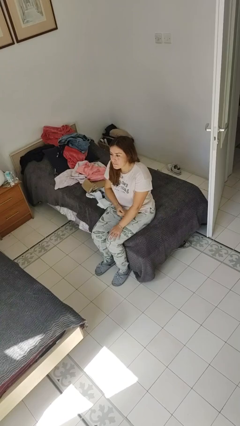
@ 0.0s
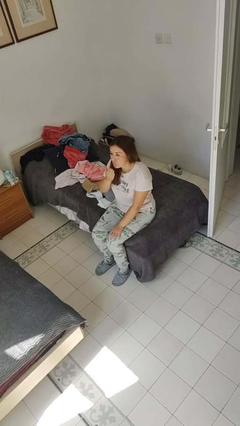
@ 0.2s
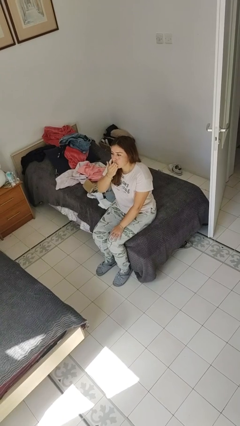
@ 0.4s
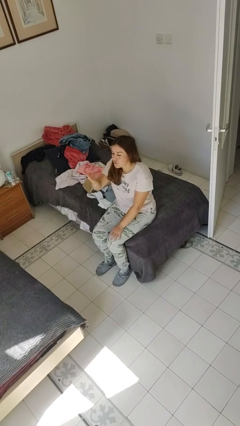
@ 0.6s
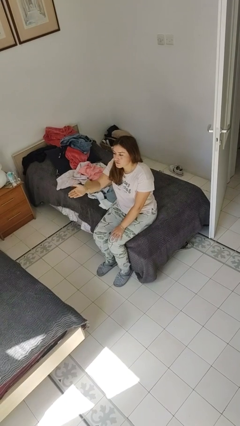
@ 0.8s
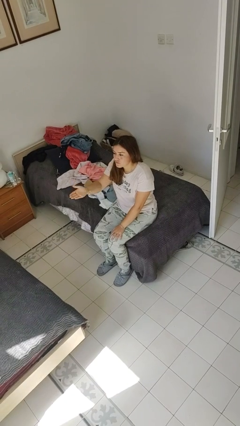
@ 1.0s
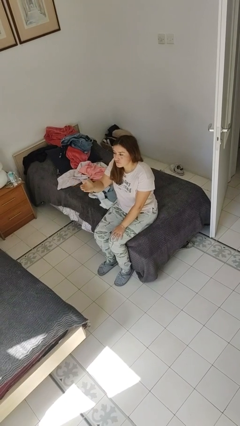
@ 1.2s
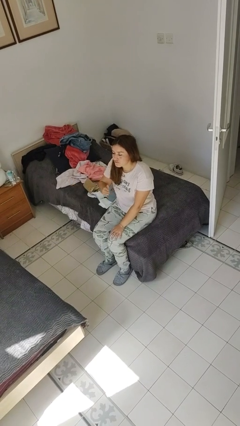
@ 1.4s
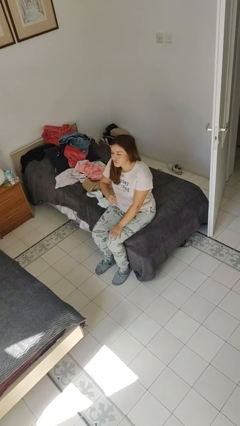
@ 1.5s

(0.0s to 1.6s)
person gestures blow kiss

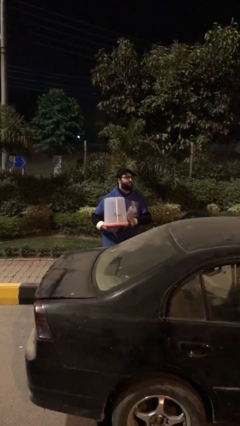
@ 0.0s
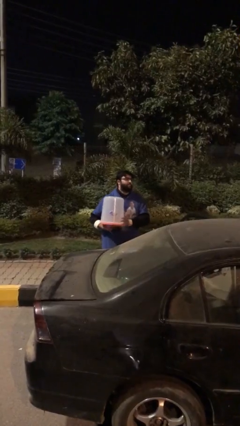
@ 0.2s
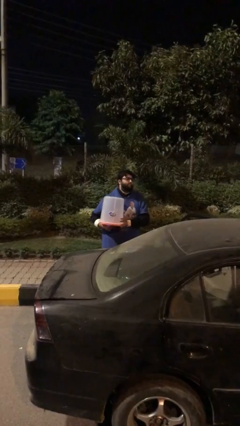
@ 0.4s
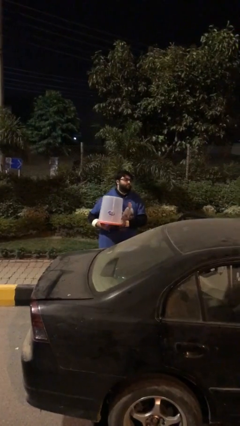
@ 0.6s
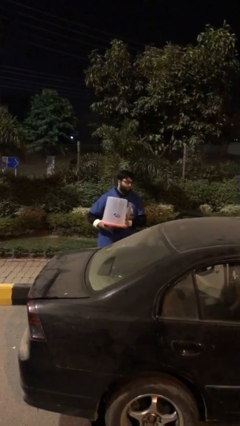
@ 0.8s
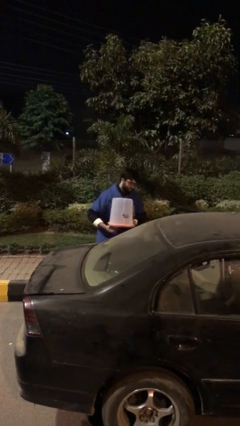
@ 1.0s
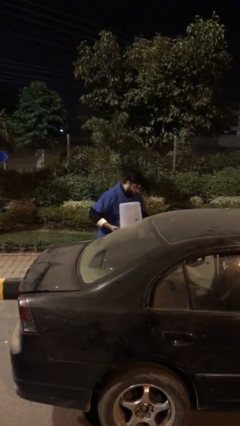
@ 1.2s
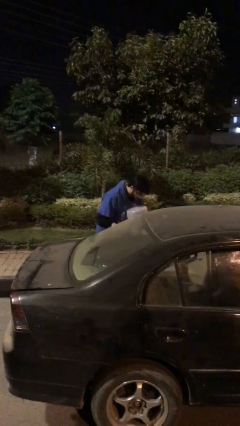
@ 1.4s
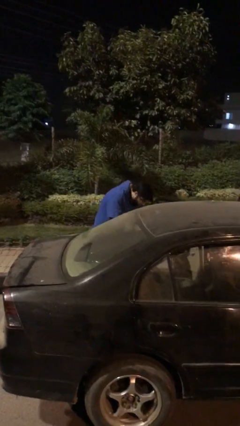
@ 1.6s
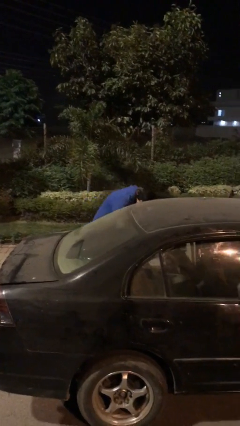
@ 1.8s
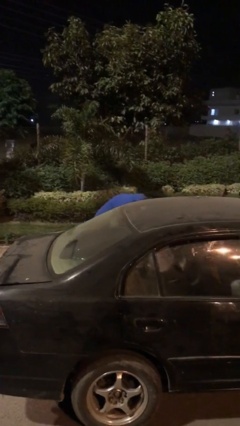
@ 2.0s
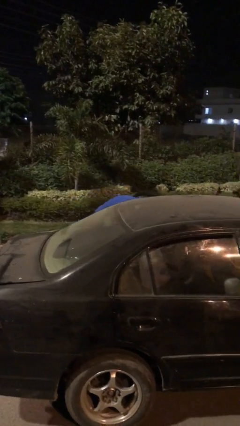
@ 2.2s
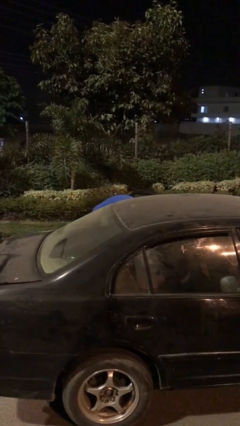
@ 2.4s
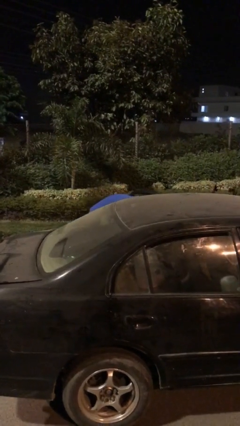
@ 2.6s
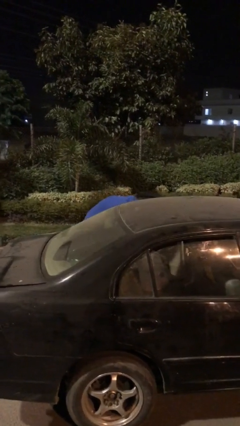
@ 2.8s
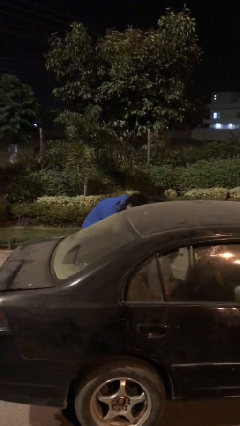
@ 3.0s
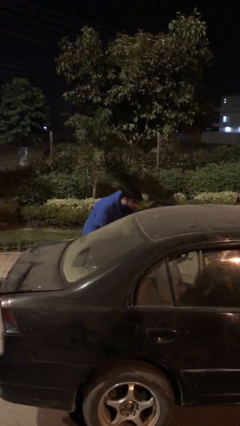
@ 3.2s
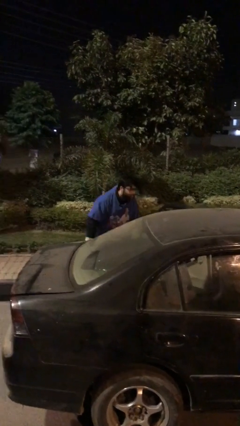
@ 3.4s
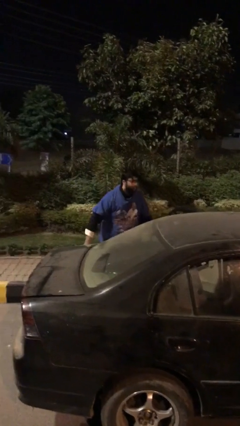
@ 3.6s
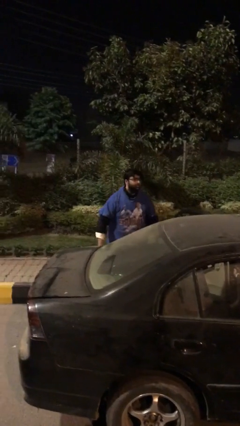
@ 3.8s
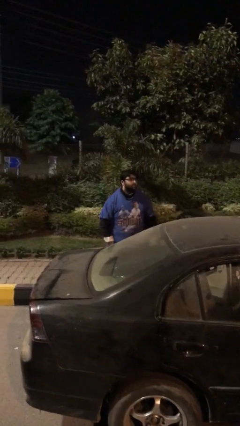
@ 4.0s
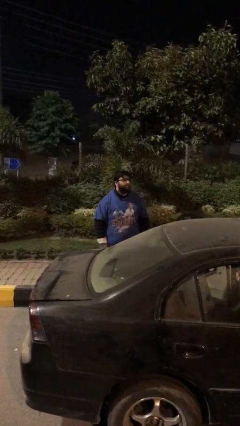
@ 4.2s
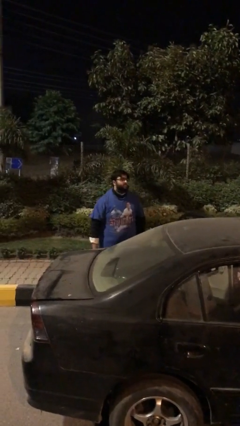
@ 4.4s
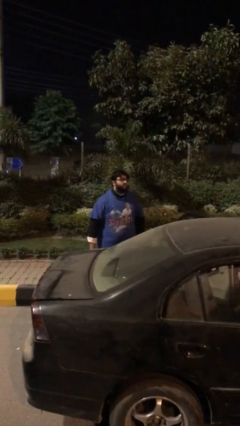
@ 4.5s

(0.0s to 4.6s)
person loads car

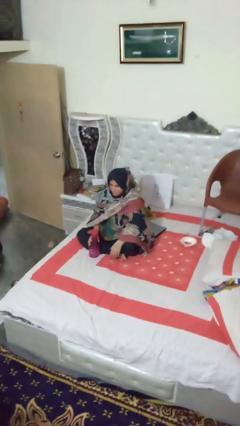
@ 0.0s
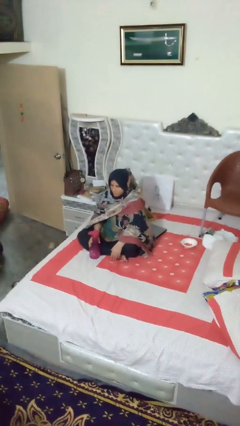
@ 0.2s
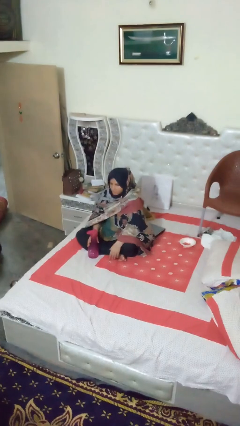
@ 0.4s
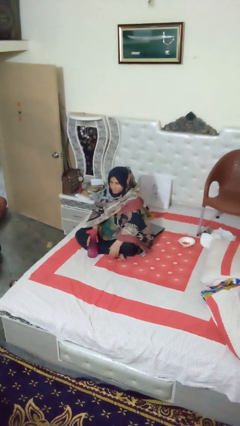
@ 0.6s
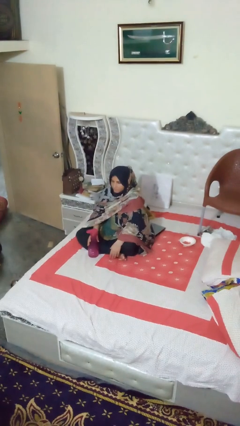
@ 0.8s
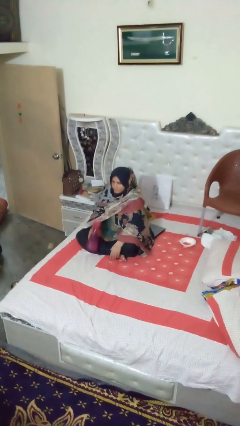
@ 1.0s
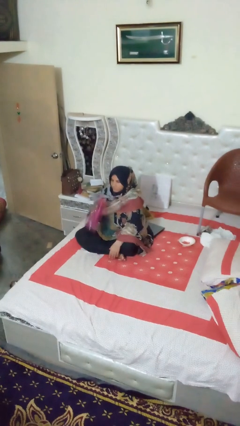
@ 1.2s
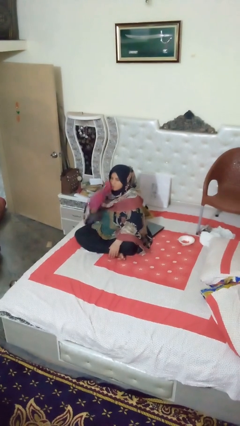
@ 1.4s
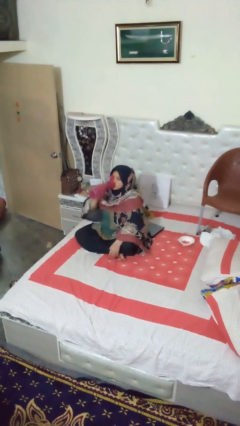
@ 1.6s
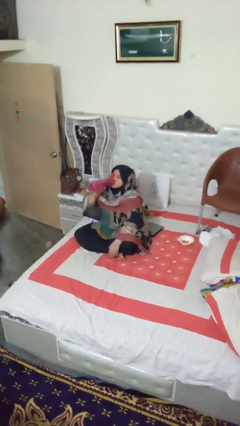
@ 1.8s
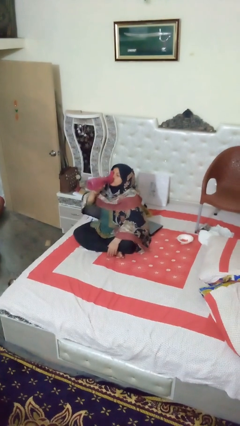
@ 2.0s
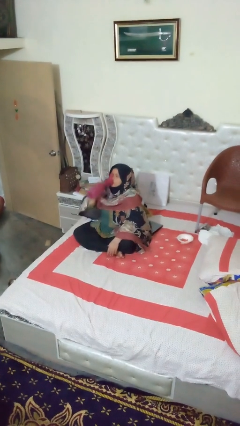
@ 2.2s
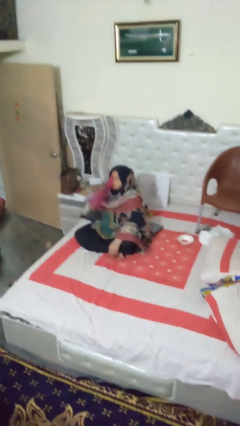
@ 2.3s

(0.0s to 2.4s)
person drinks from bottle

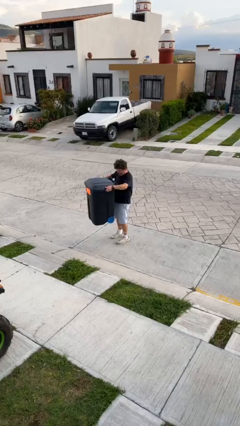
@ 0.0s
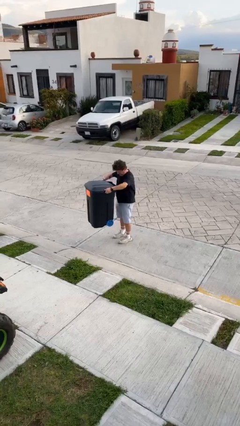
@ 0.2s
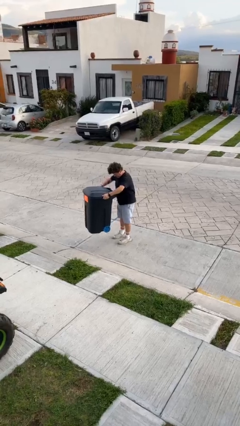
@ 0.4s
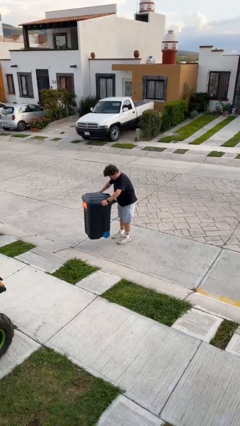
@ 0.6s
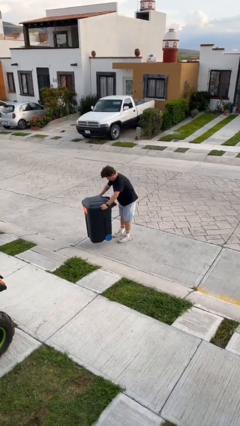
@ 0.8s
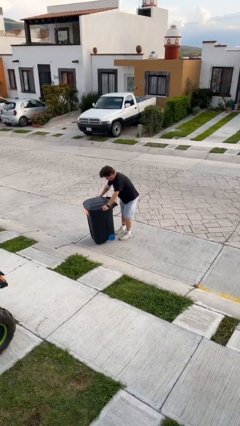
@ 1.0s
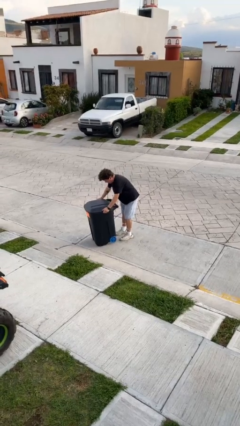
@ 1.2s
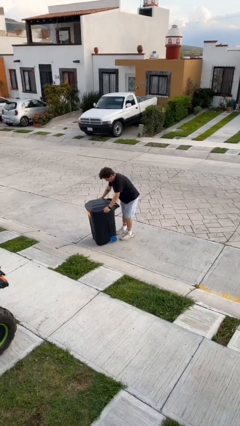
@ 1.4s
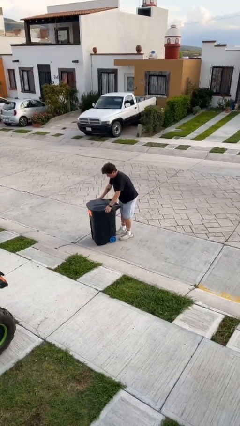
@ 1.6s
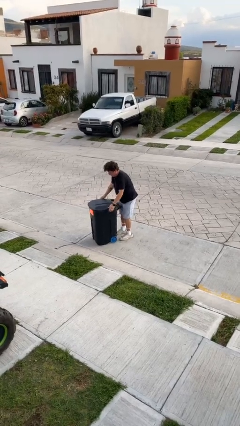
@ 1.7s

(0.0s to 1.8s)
person puts down object on floor

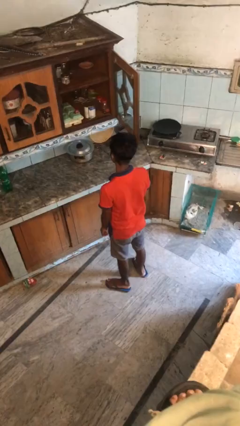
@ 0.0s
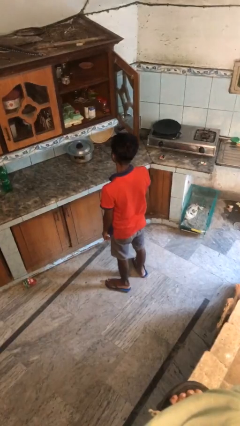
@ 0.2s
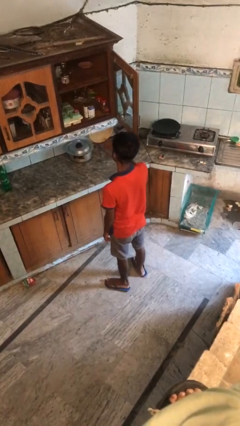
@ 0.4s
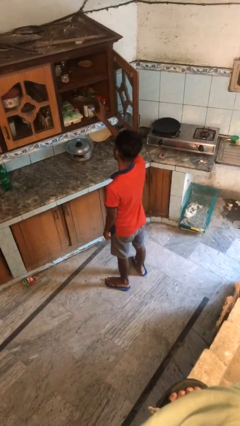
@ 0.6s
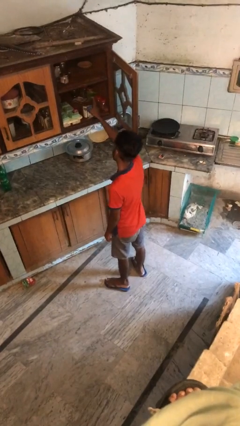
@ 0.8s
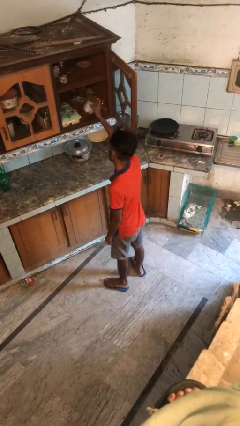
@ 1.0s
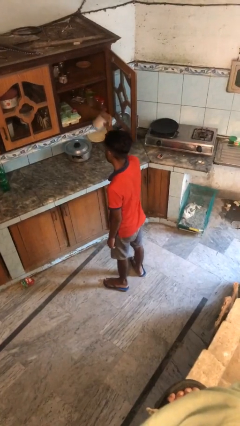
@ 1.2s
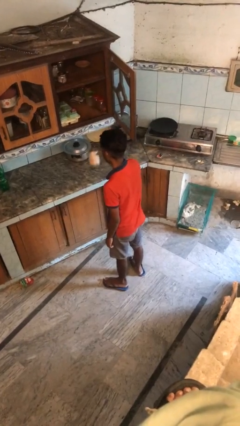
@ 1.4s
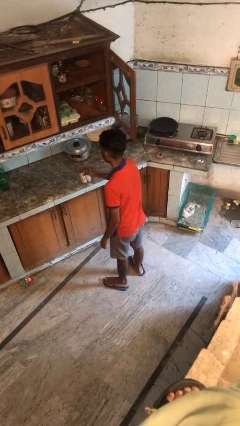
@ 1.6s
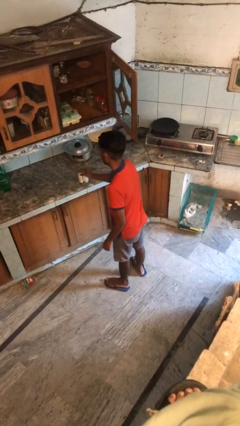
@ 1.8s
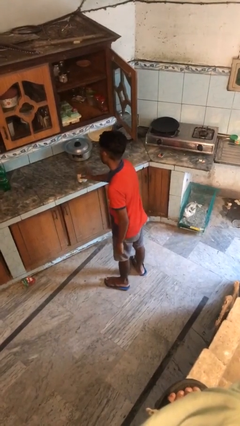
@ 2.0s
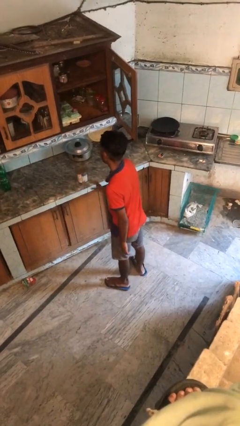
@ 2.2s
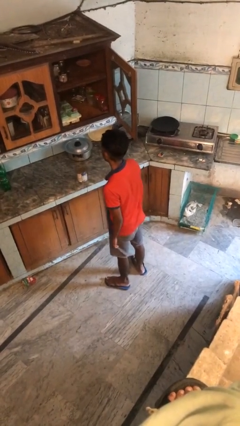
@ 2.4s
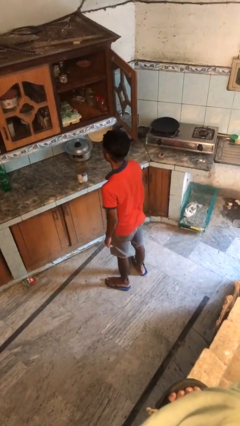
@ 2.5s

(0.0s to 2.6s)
person takes object from cabinet

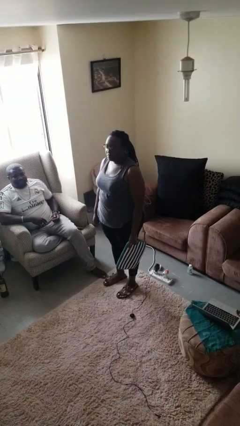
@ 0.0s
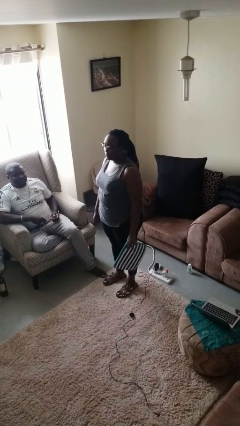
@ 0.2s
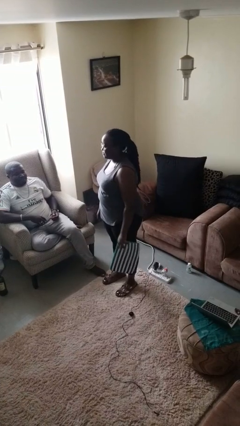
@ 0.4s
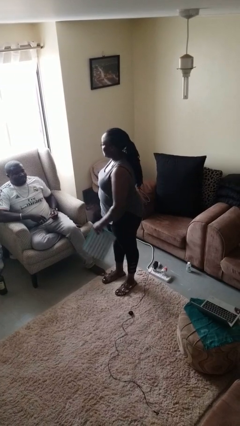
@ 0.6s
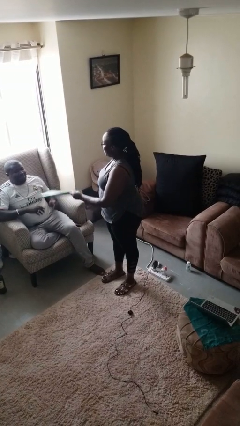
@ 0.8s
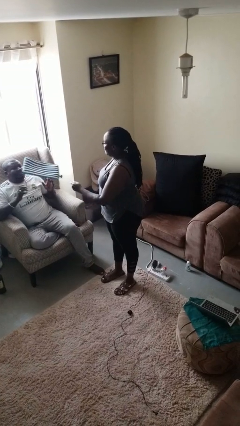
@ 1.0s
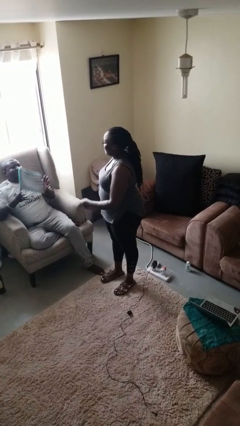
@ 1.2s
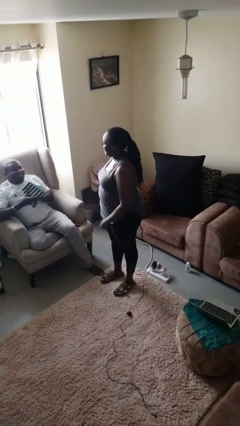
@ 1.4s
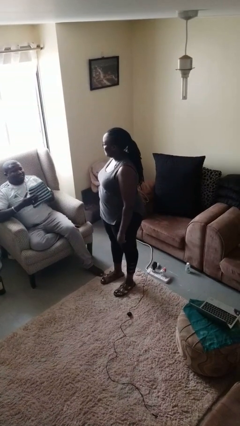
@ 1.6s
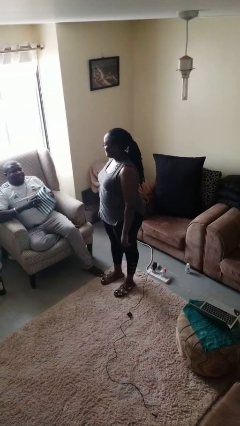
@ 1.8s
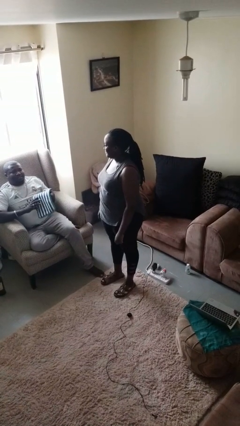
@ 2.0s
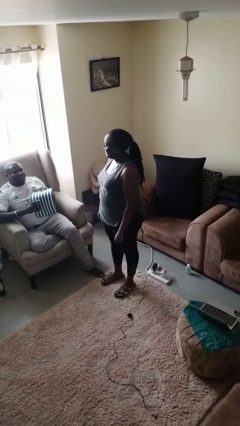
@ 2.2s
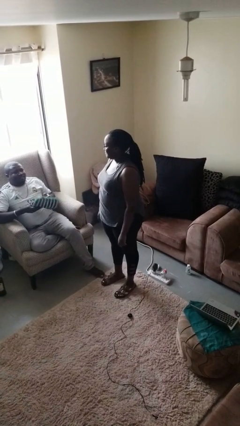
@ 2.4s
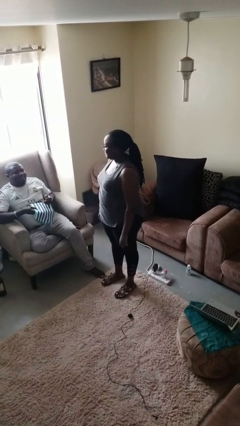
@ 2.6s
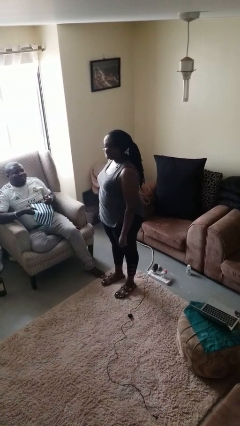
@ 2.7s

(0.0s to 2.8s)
person throws object to person

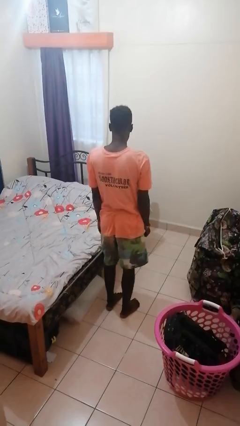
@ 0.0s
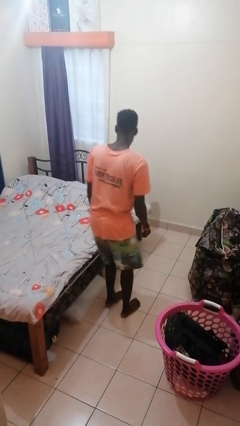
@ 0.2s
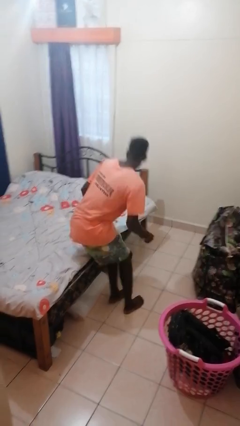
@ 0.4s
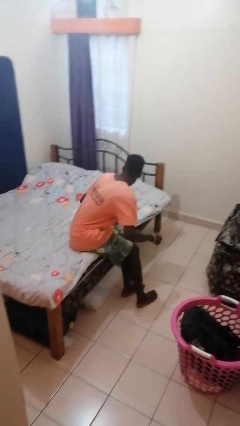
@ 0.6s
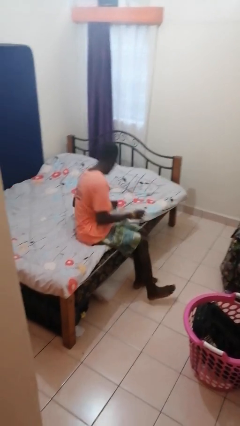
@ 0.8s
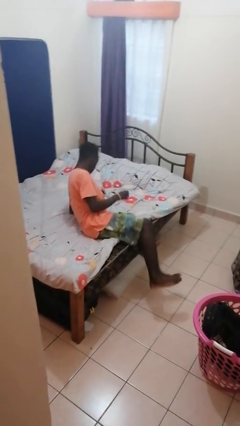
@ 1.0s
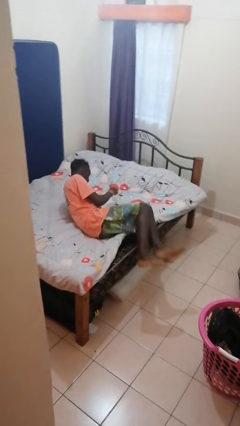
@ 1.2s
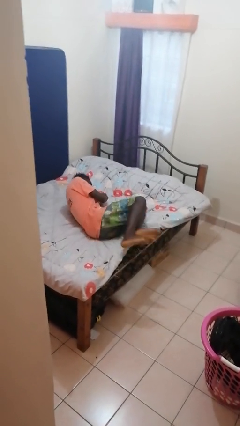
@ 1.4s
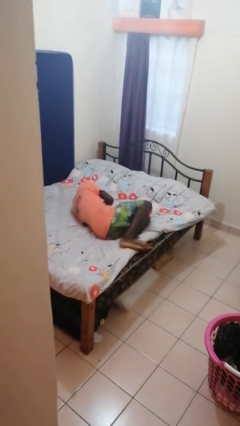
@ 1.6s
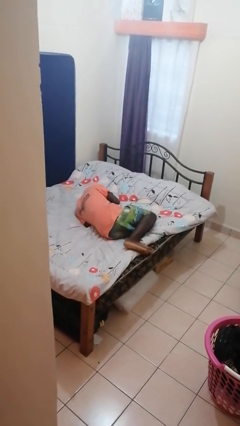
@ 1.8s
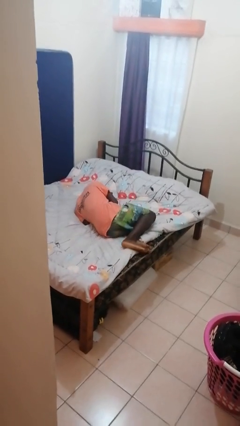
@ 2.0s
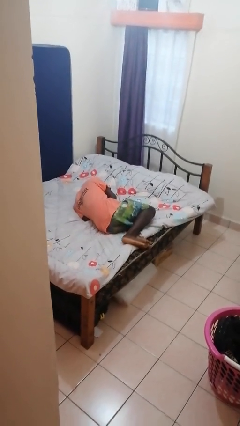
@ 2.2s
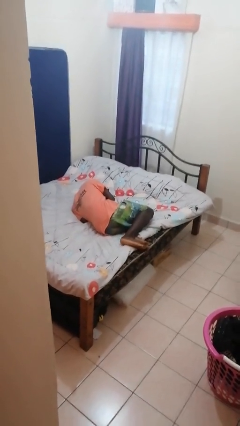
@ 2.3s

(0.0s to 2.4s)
person lies down on bed
